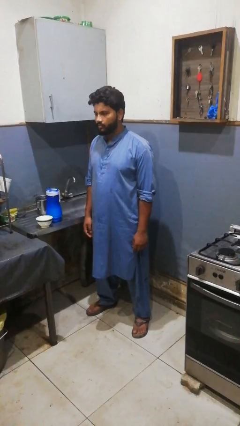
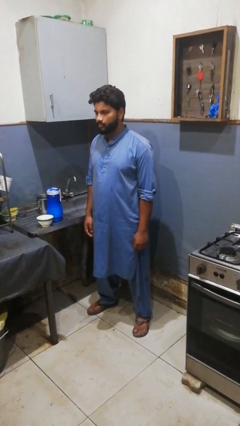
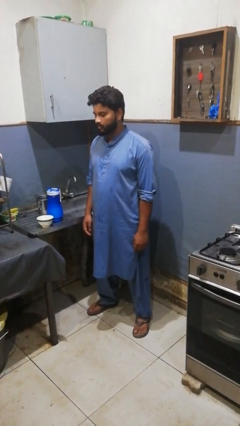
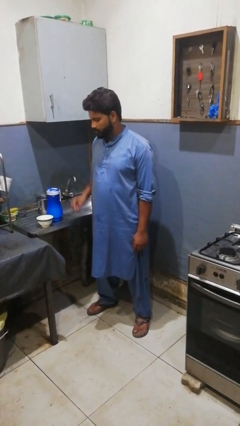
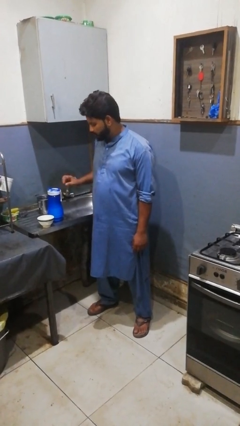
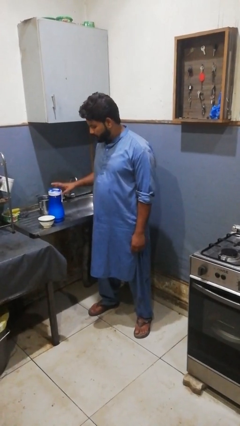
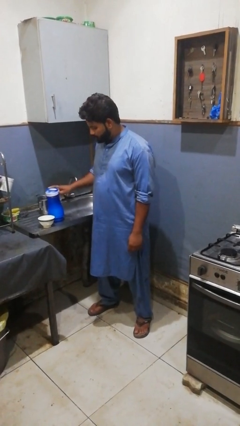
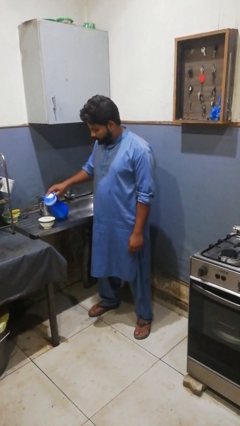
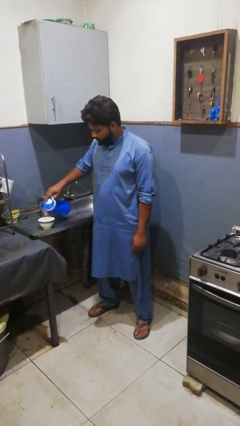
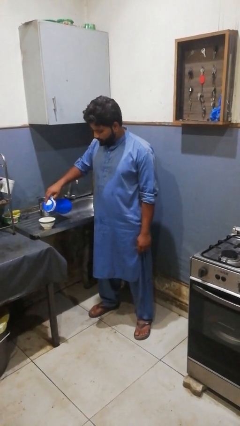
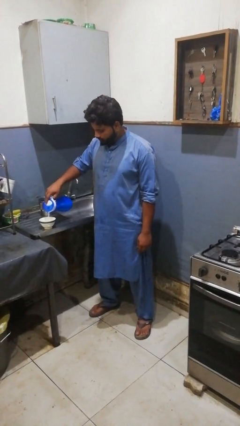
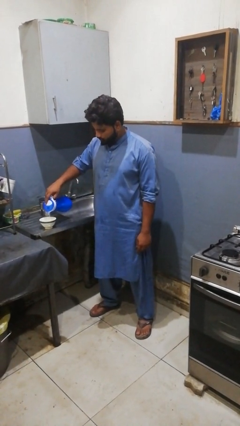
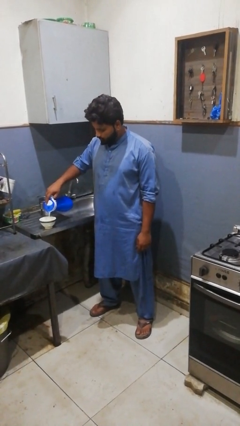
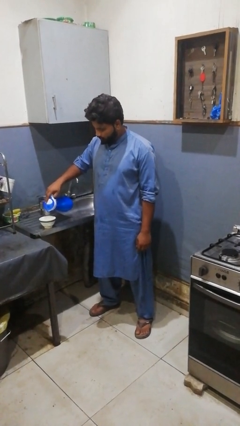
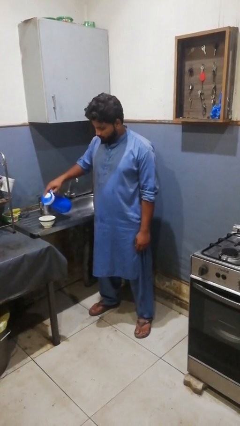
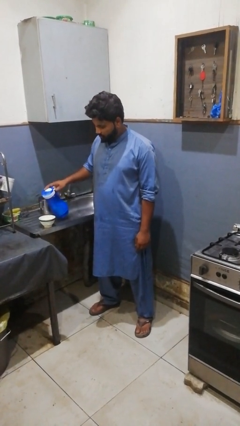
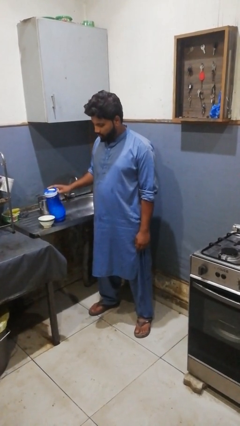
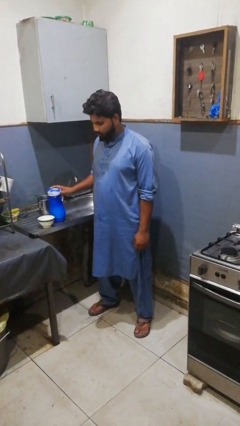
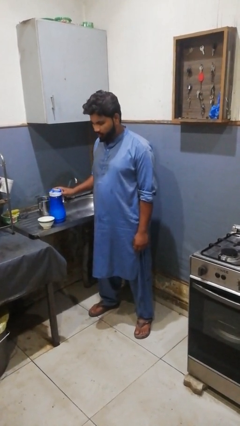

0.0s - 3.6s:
person pours into bowl

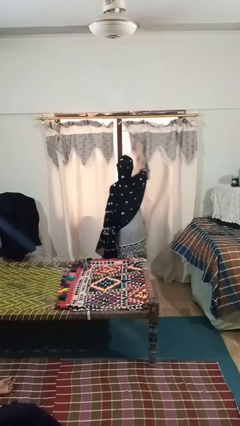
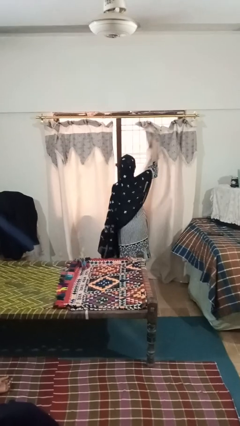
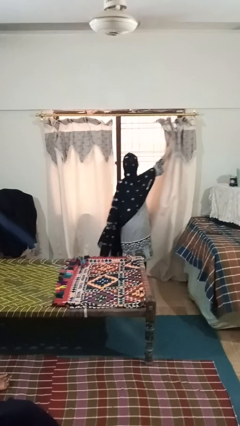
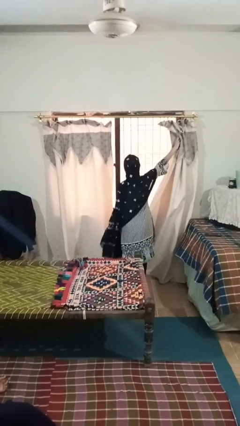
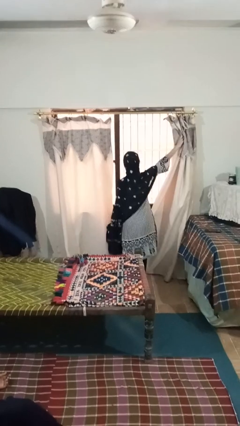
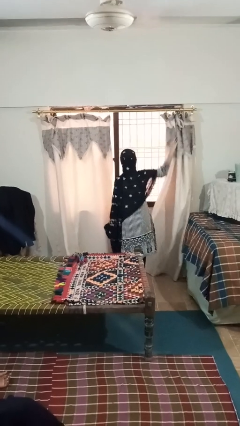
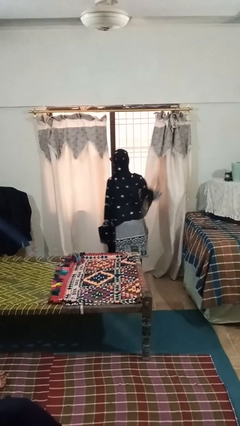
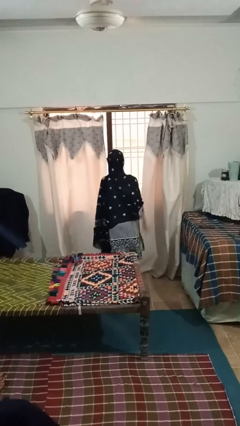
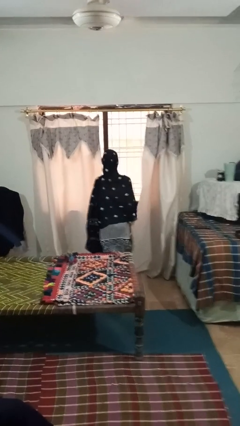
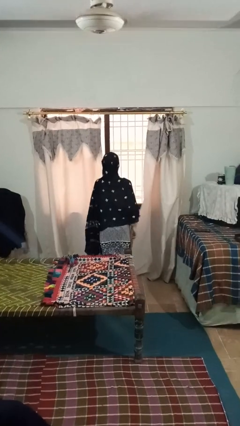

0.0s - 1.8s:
person opens curtains

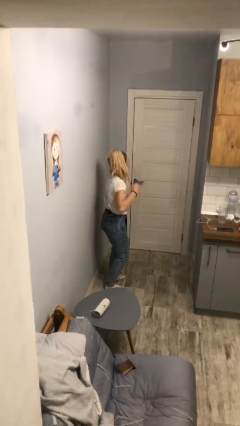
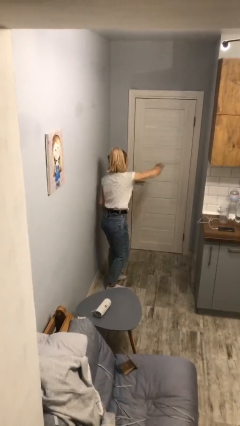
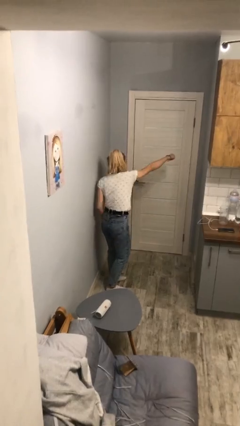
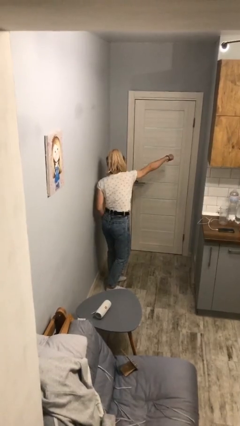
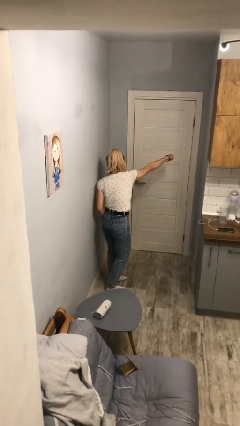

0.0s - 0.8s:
person punches

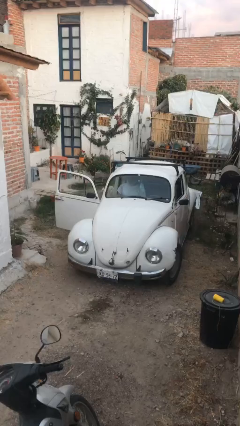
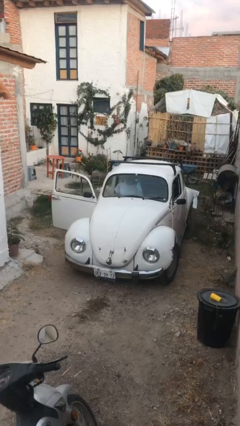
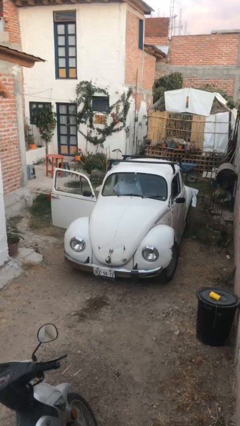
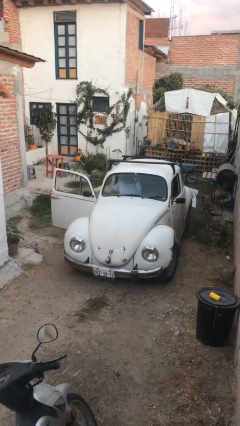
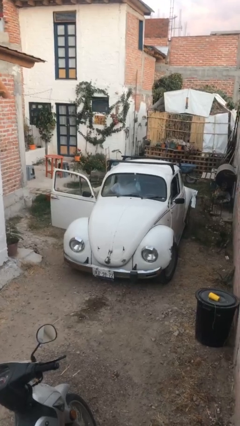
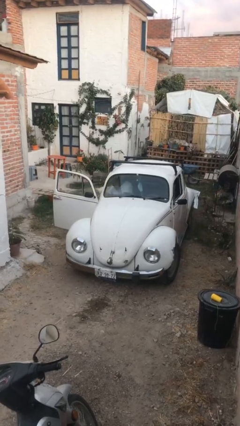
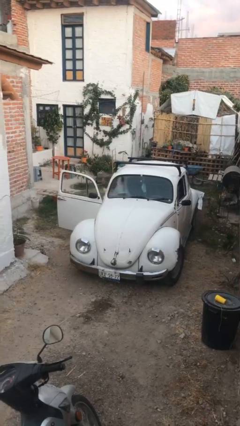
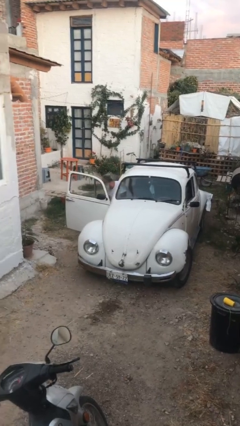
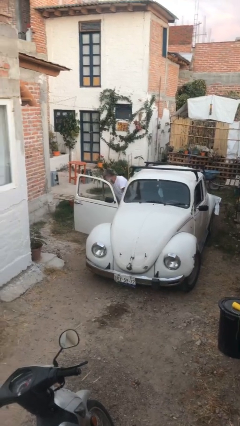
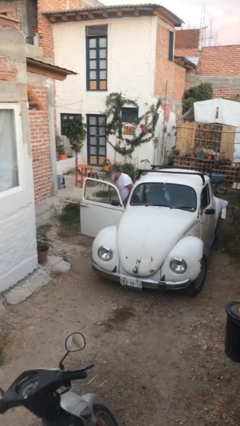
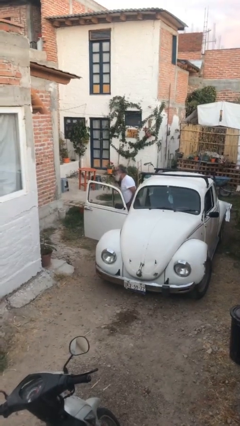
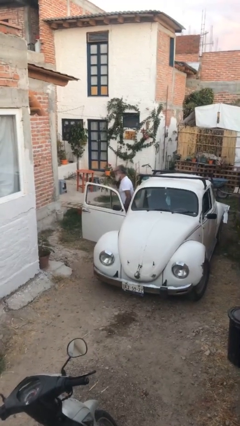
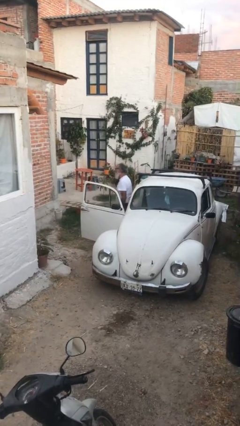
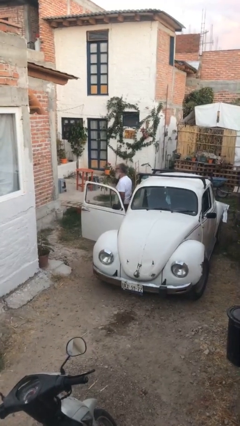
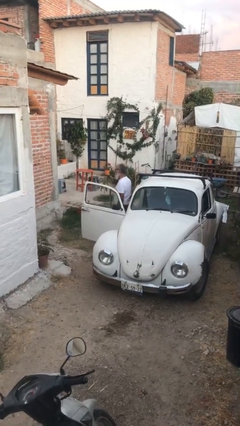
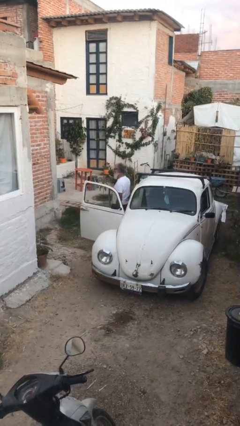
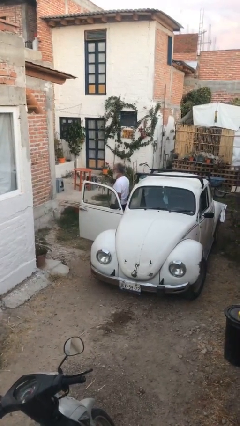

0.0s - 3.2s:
person exits car

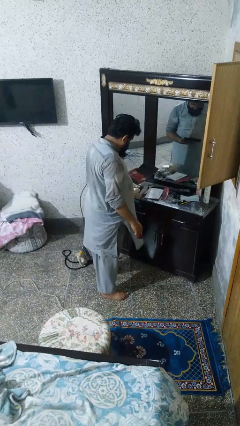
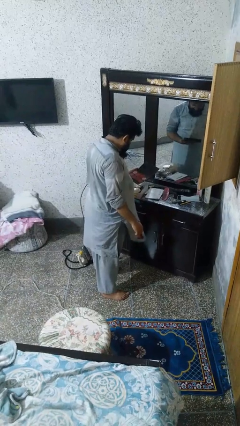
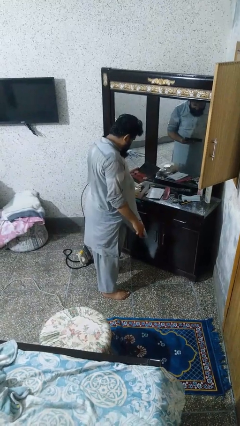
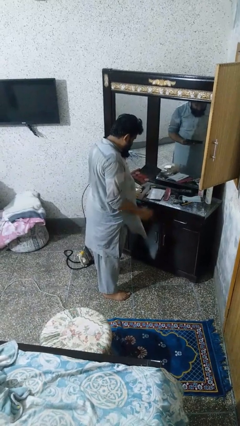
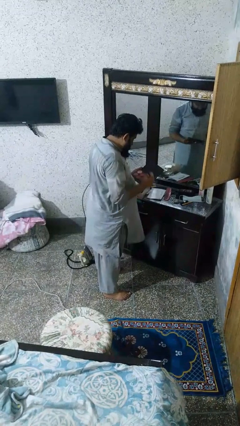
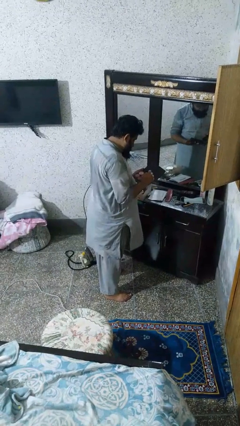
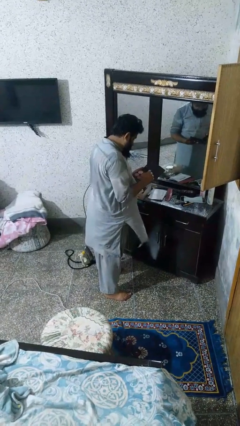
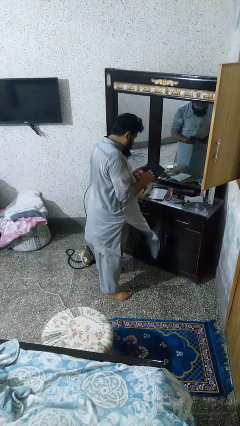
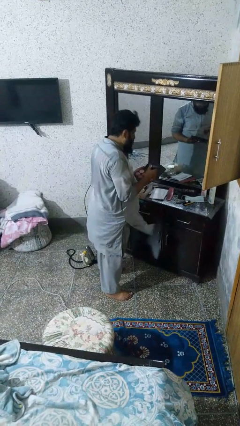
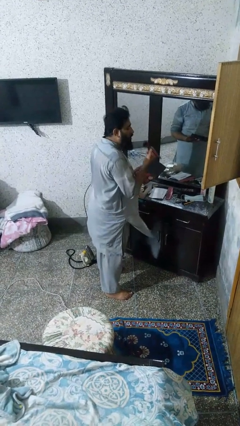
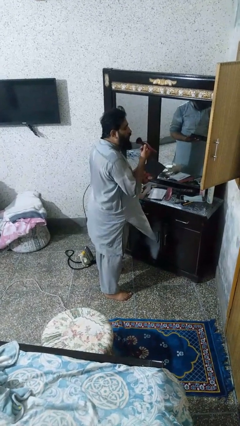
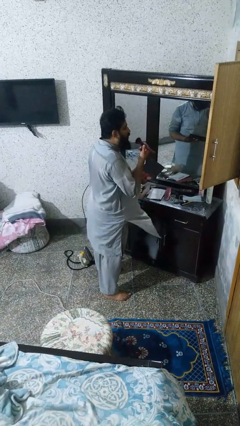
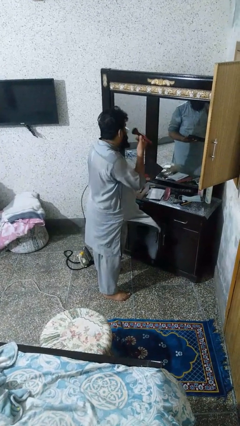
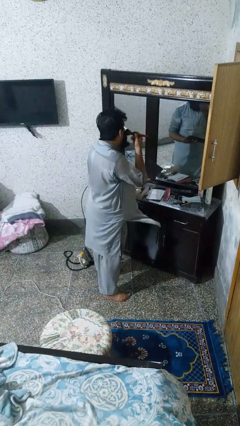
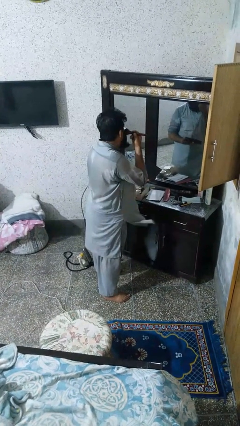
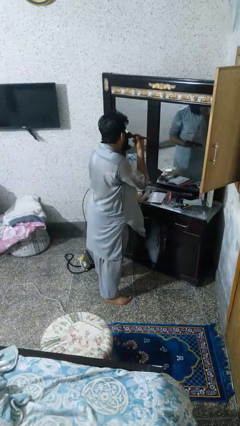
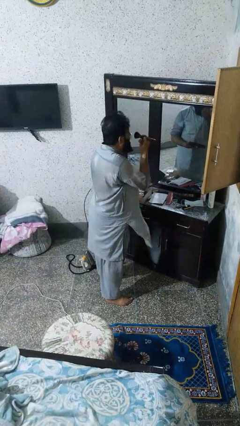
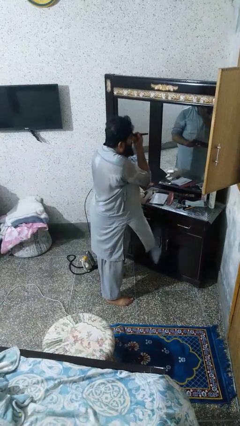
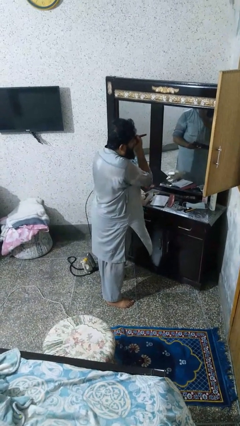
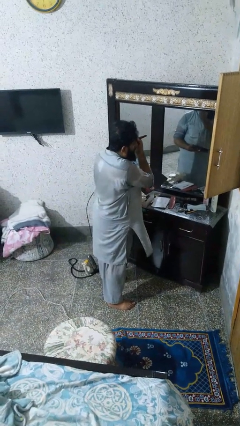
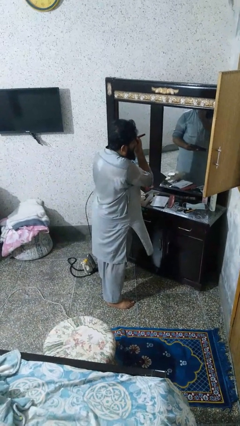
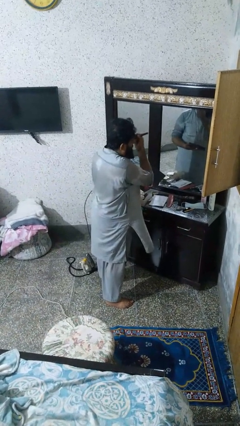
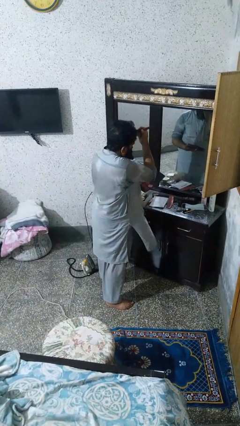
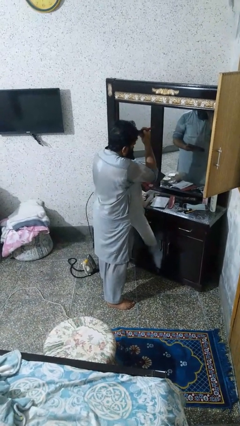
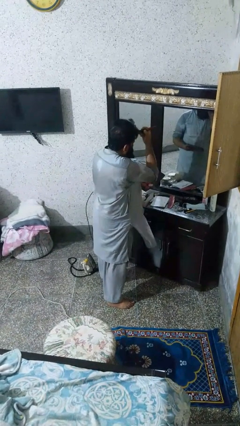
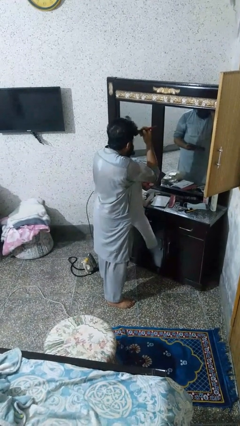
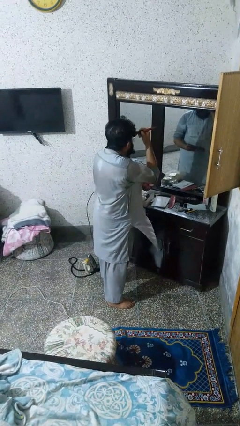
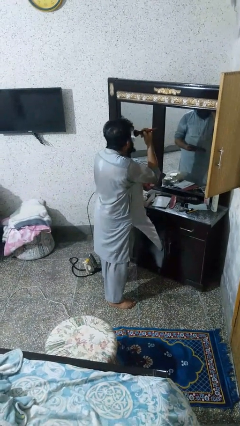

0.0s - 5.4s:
person applies foundation makeup

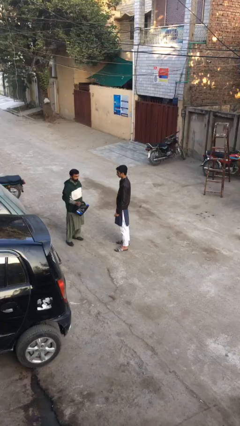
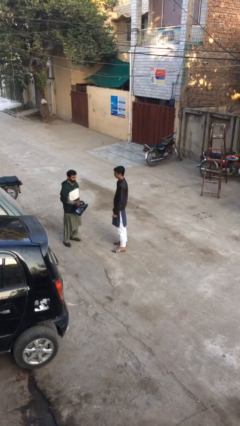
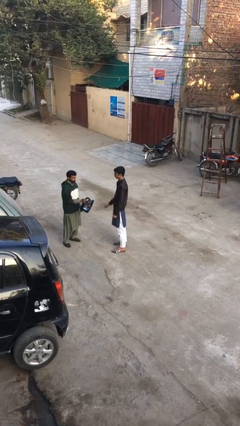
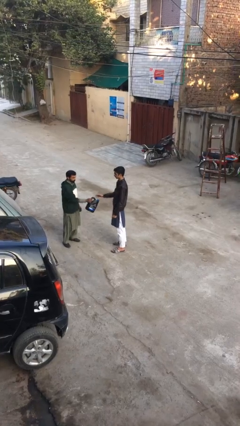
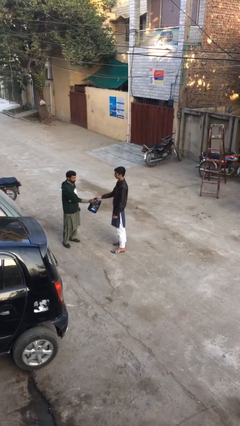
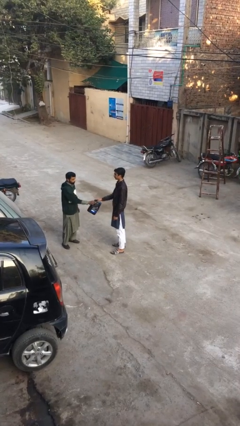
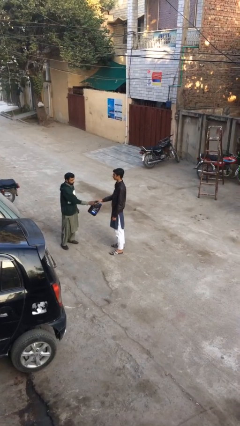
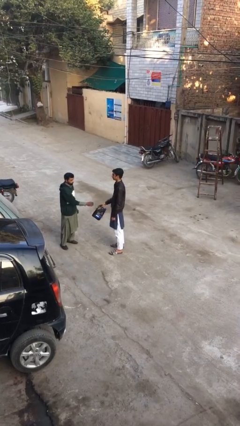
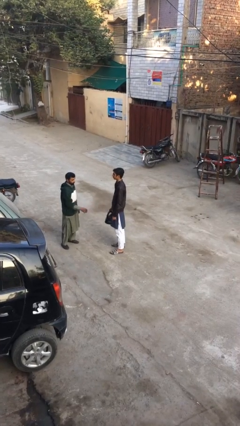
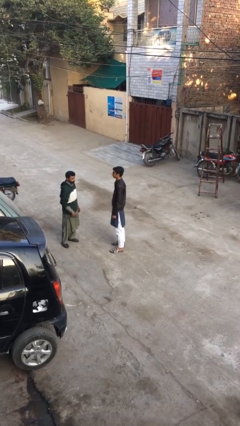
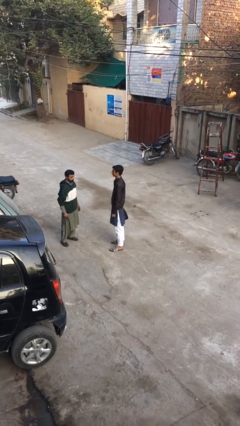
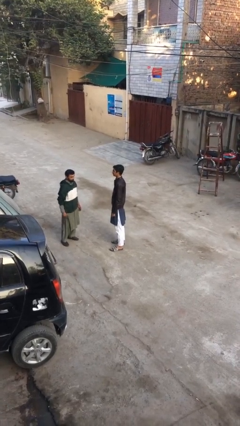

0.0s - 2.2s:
person transfers object to person

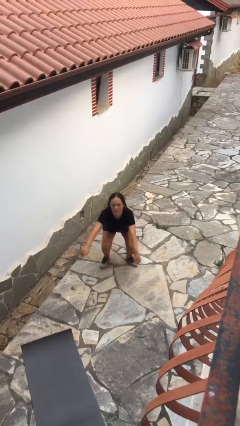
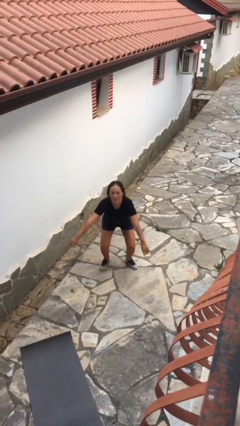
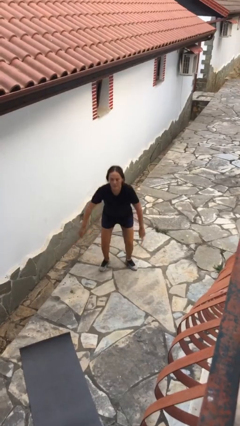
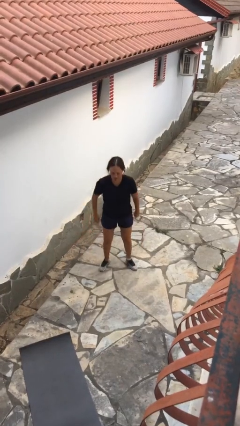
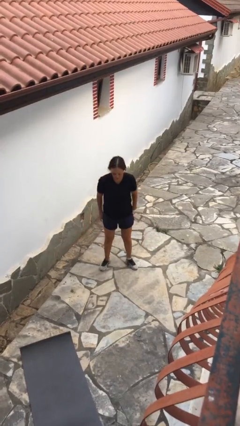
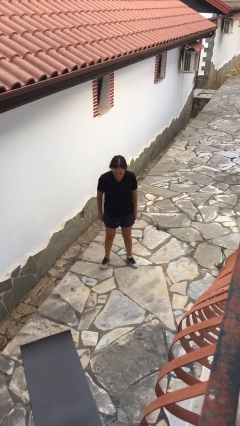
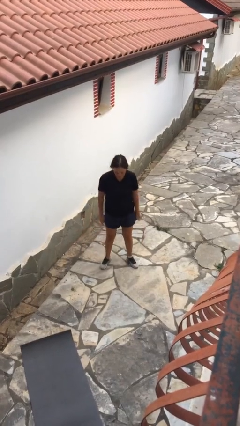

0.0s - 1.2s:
person stands up
